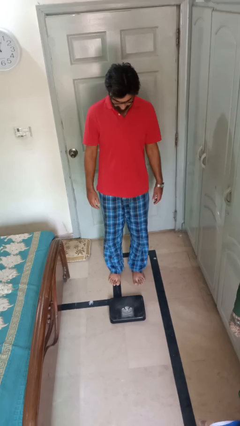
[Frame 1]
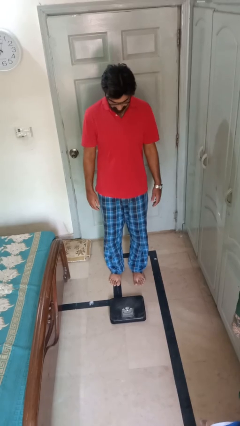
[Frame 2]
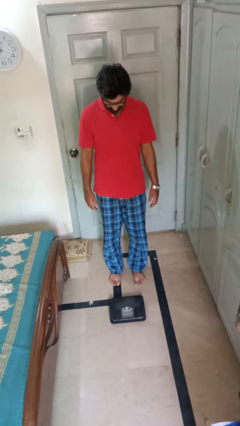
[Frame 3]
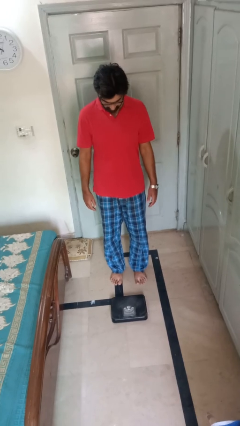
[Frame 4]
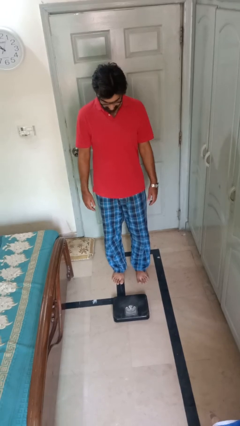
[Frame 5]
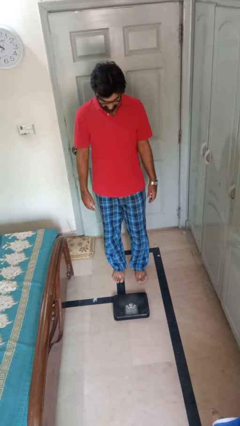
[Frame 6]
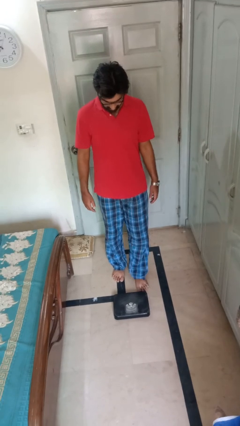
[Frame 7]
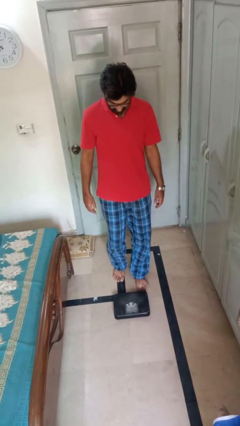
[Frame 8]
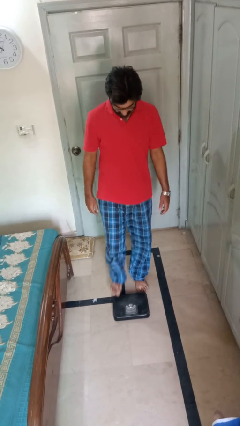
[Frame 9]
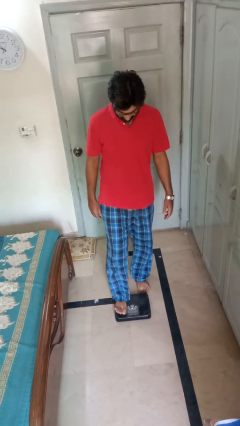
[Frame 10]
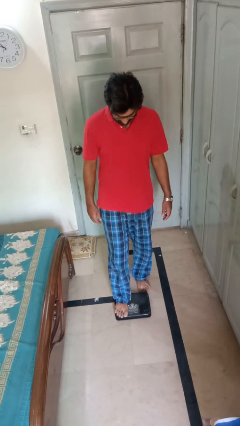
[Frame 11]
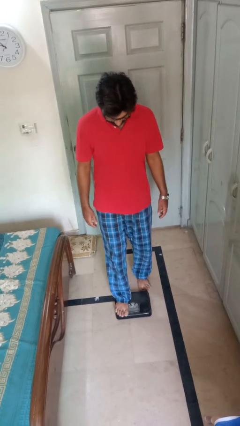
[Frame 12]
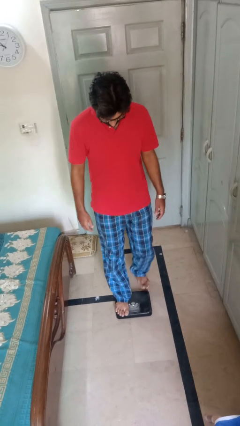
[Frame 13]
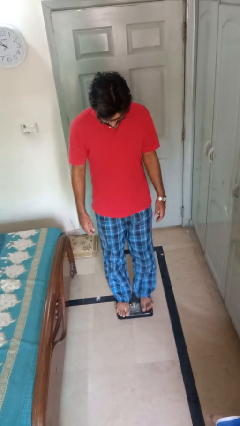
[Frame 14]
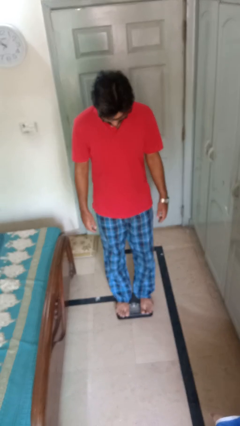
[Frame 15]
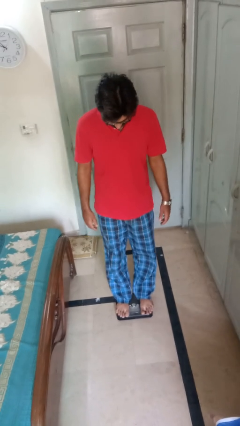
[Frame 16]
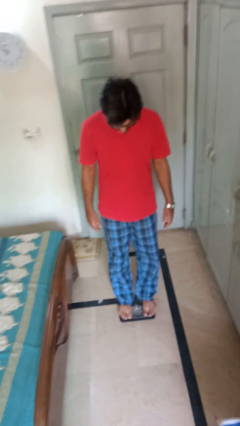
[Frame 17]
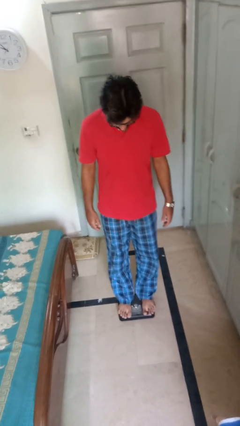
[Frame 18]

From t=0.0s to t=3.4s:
person uses bodyweight scale

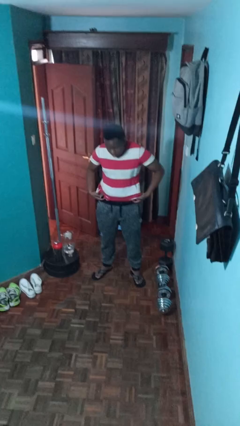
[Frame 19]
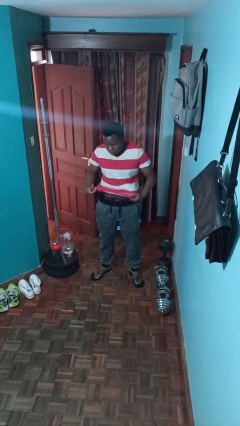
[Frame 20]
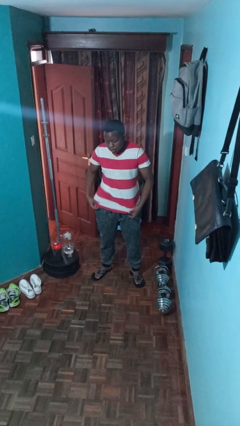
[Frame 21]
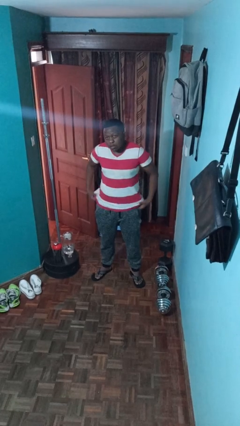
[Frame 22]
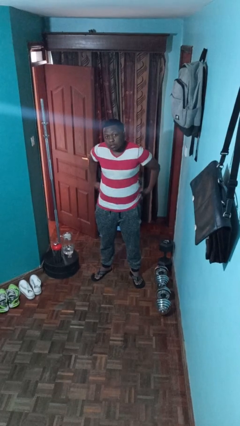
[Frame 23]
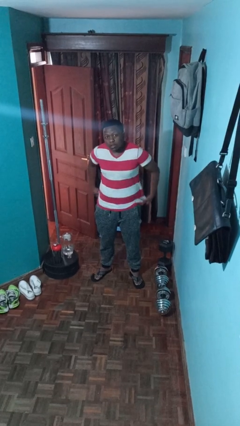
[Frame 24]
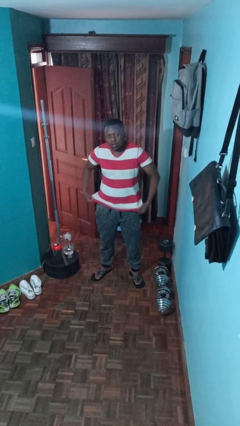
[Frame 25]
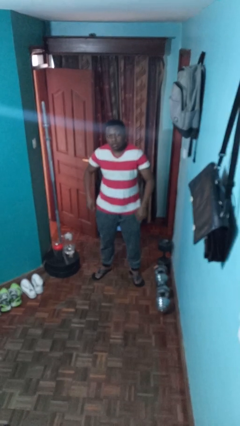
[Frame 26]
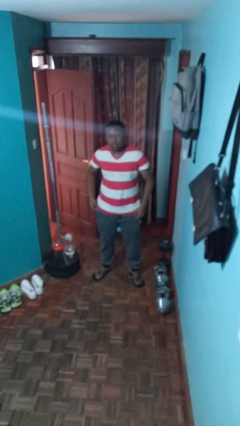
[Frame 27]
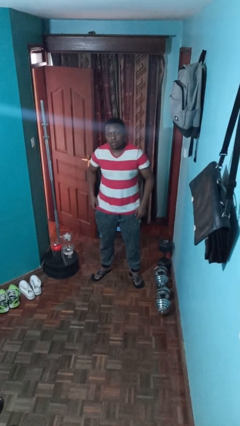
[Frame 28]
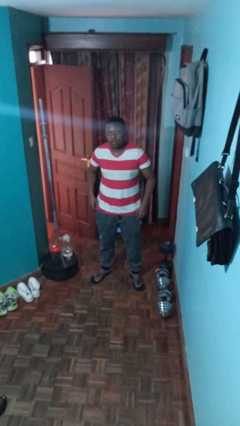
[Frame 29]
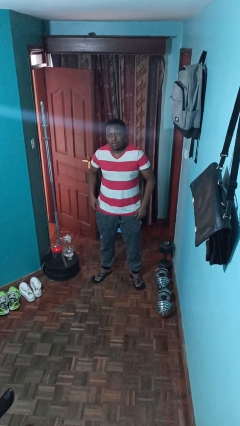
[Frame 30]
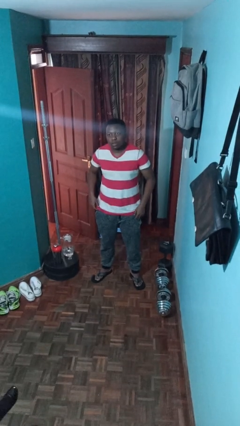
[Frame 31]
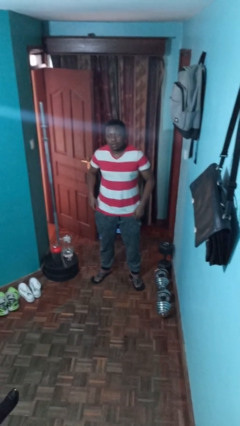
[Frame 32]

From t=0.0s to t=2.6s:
person untucks shirt

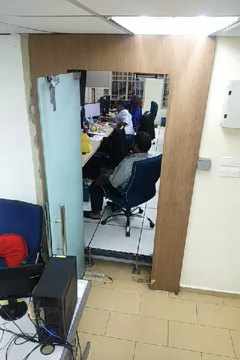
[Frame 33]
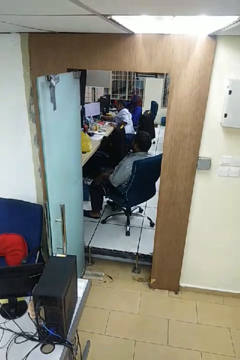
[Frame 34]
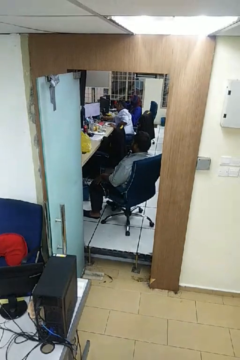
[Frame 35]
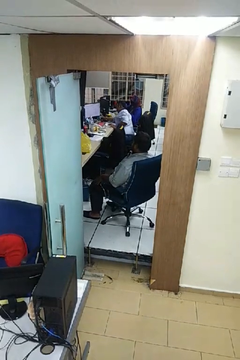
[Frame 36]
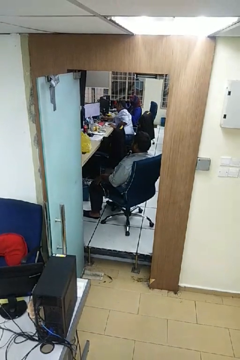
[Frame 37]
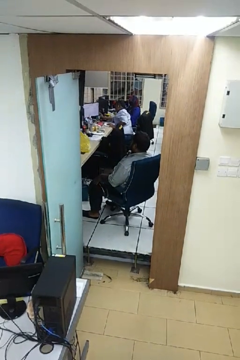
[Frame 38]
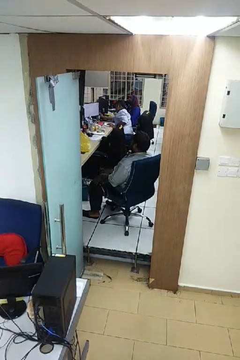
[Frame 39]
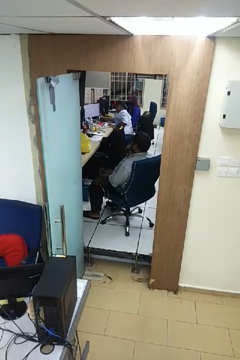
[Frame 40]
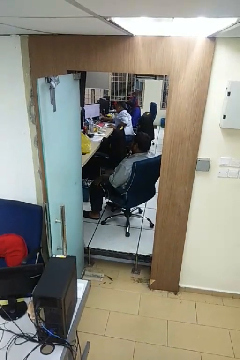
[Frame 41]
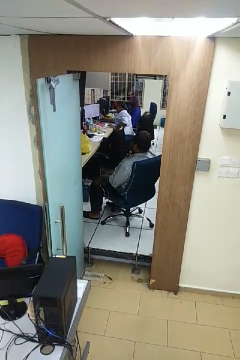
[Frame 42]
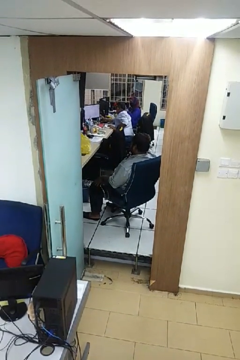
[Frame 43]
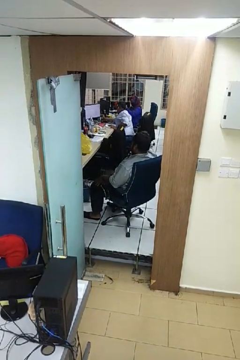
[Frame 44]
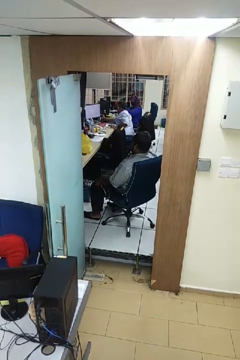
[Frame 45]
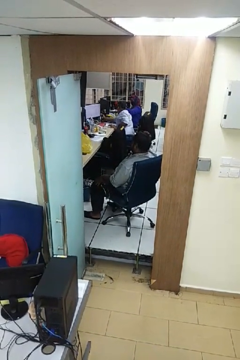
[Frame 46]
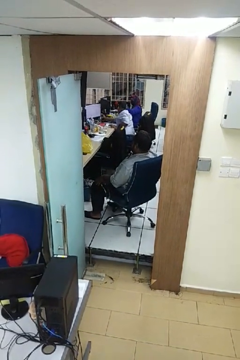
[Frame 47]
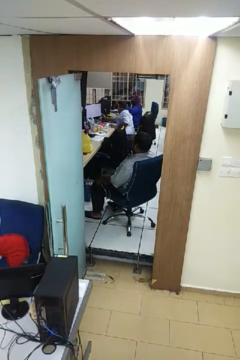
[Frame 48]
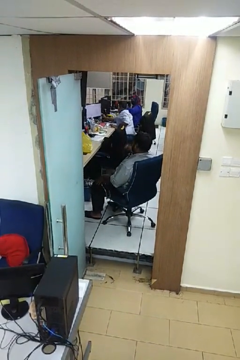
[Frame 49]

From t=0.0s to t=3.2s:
person scratches face

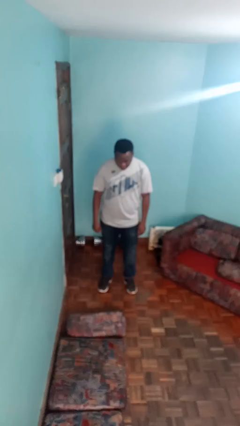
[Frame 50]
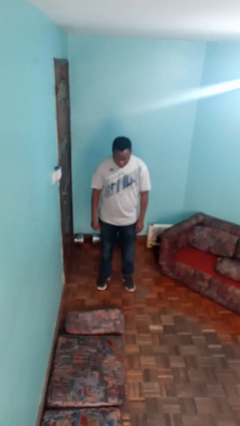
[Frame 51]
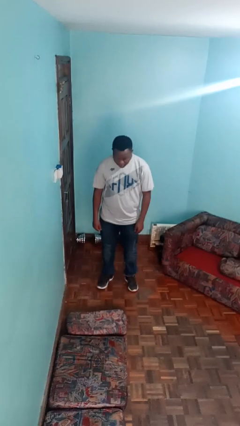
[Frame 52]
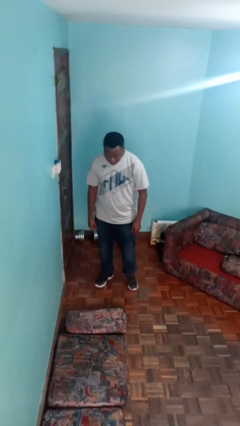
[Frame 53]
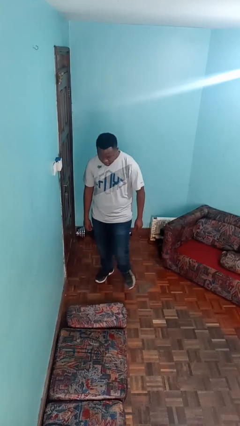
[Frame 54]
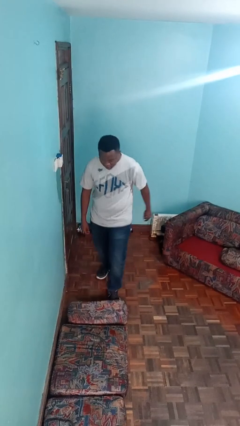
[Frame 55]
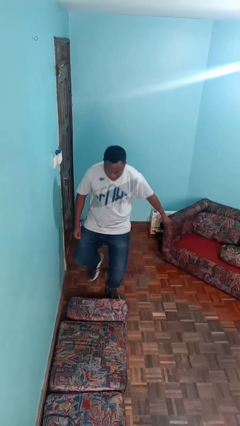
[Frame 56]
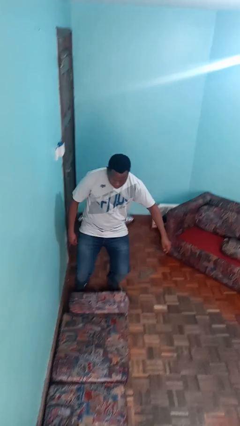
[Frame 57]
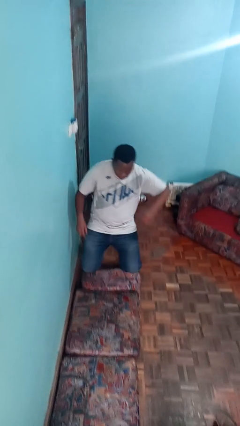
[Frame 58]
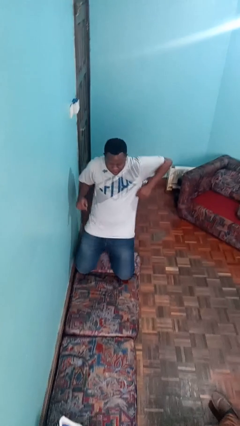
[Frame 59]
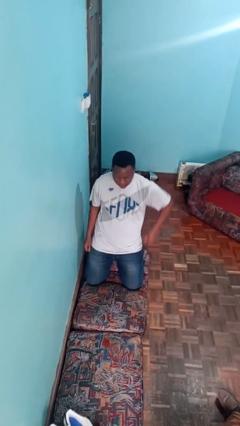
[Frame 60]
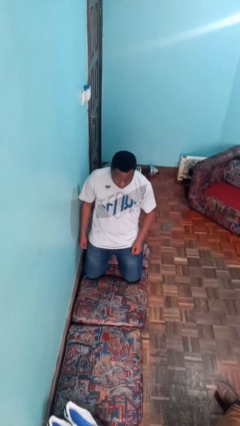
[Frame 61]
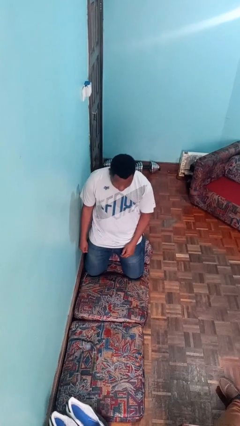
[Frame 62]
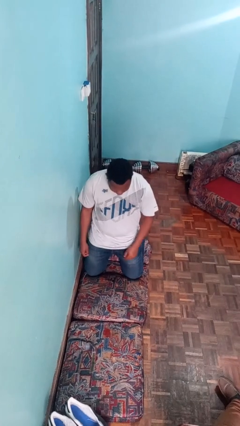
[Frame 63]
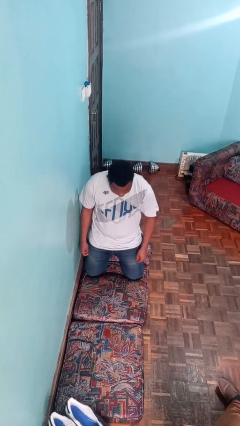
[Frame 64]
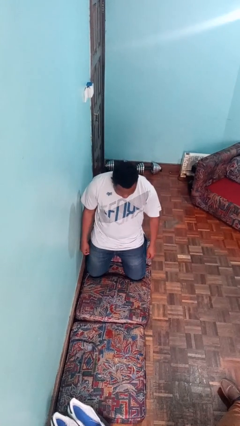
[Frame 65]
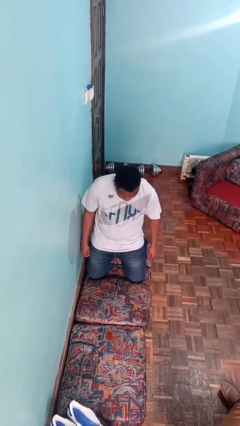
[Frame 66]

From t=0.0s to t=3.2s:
person trips on object on floor

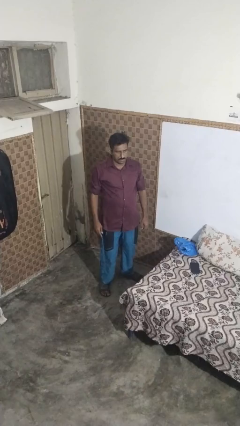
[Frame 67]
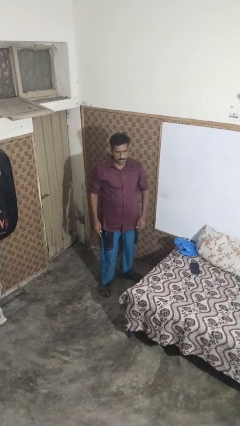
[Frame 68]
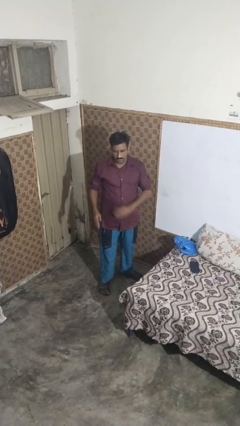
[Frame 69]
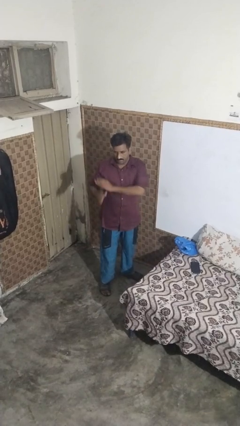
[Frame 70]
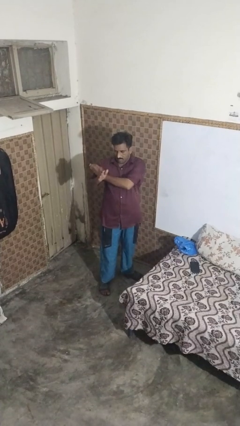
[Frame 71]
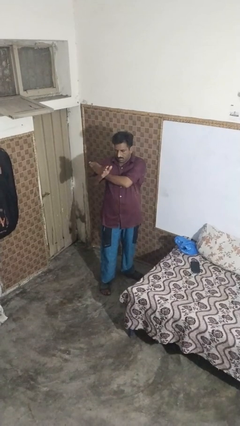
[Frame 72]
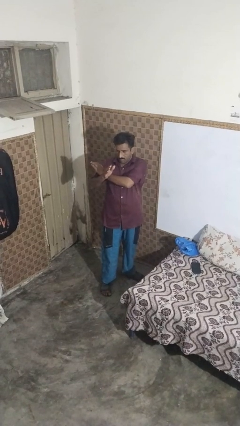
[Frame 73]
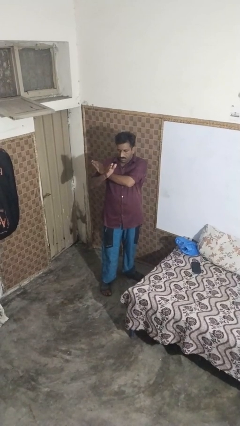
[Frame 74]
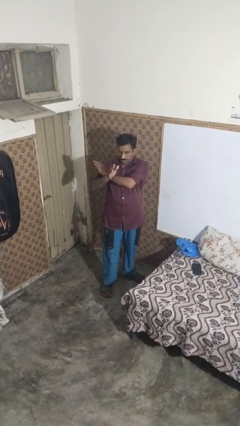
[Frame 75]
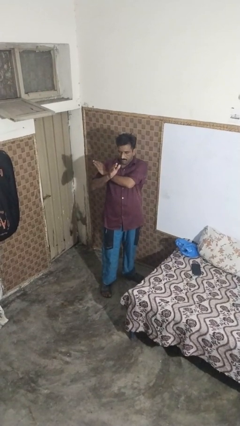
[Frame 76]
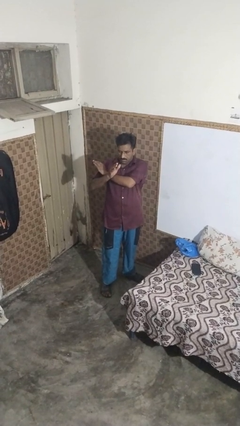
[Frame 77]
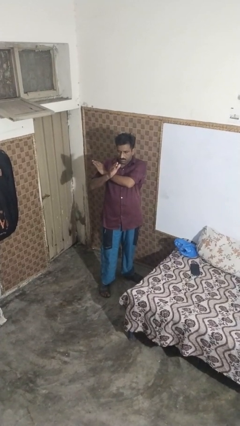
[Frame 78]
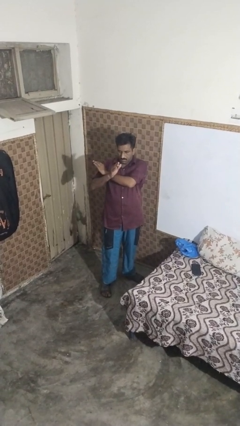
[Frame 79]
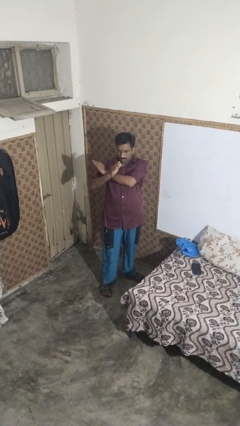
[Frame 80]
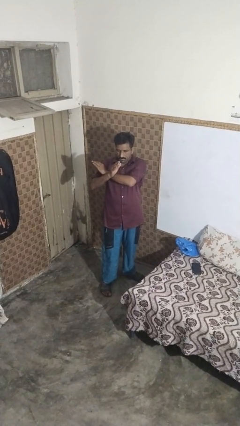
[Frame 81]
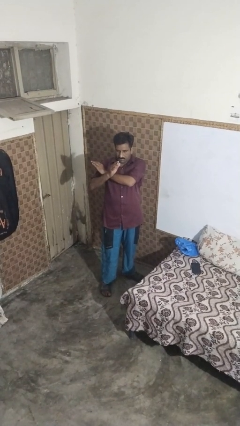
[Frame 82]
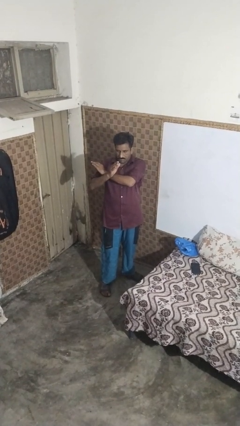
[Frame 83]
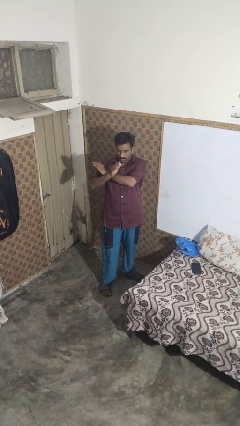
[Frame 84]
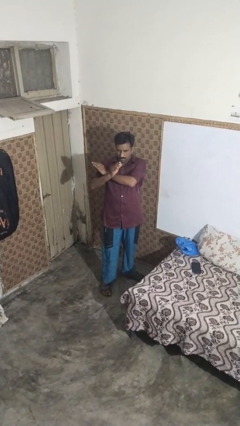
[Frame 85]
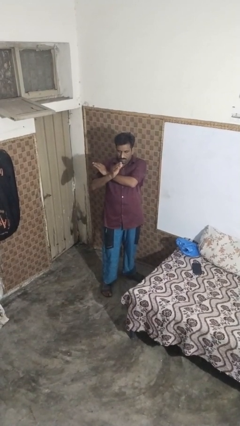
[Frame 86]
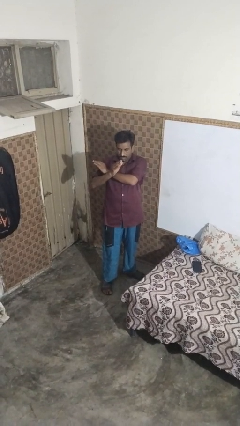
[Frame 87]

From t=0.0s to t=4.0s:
person gestures arms x

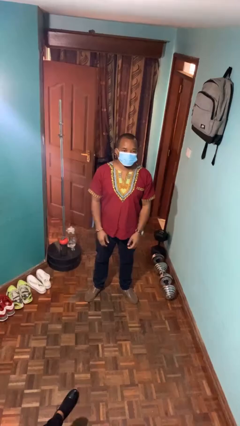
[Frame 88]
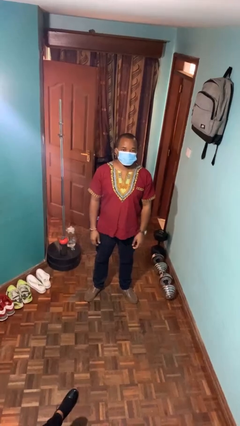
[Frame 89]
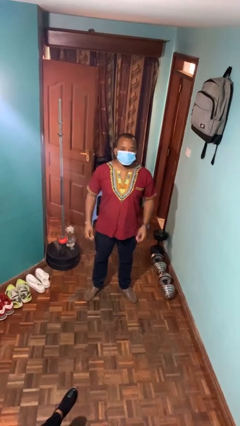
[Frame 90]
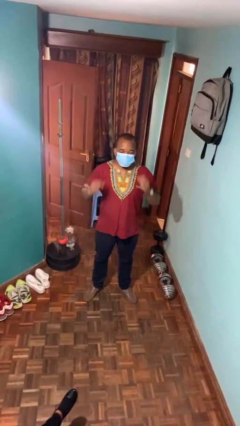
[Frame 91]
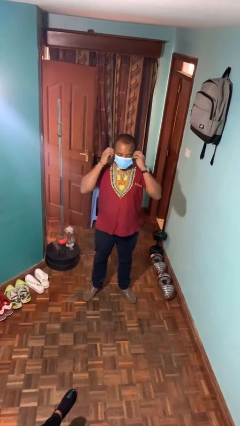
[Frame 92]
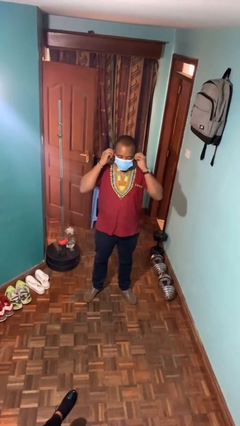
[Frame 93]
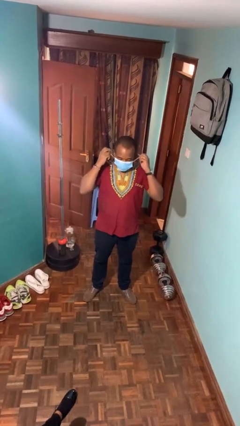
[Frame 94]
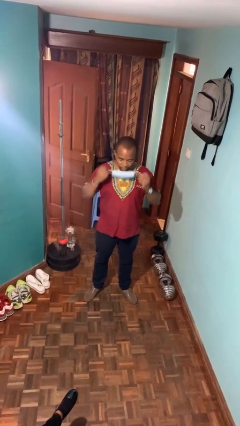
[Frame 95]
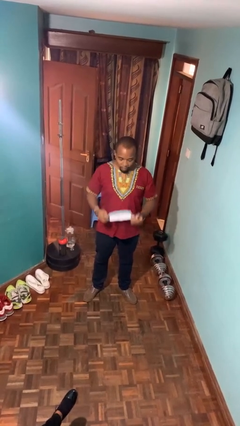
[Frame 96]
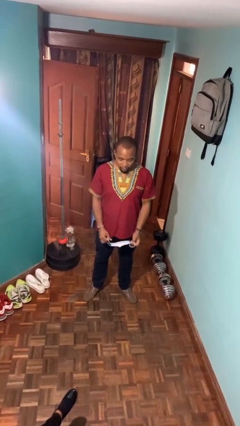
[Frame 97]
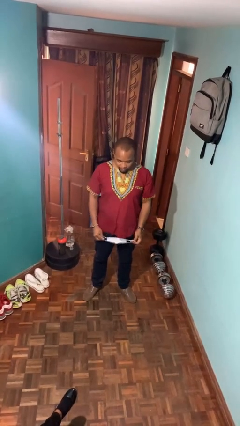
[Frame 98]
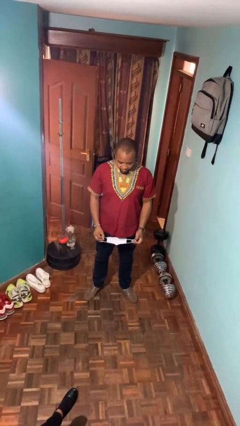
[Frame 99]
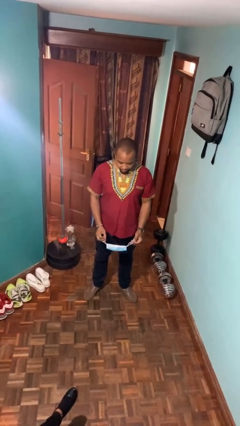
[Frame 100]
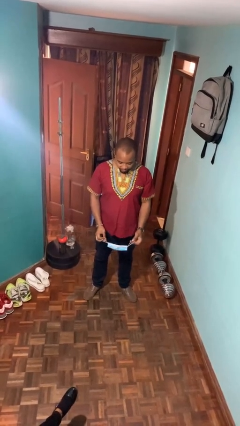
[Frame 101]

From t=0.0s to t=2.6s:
person takes off facemask
